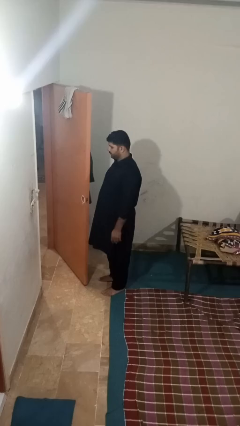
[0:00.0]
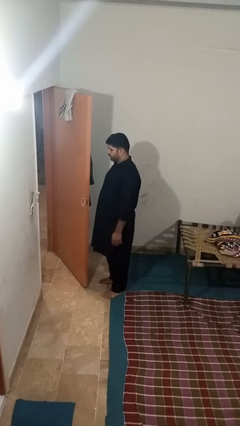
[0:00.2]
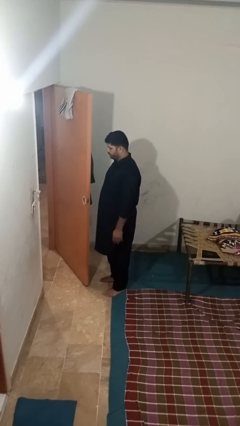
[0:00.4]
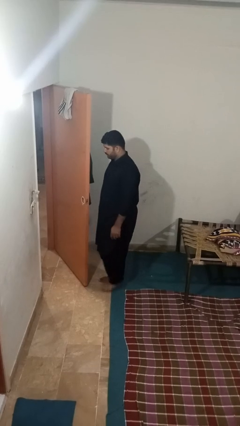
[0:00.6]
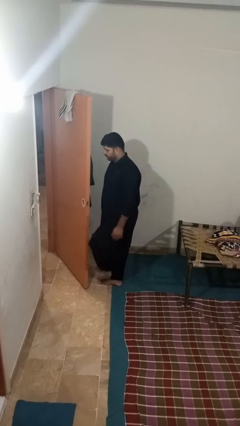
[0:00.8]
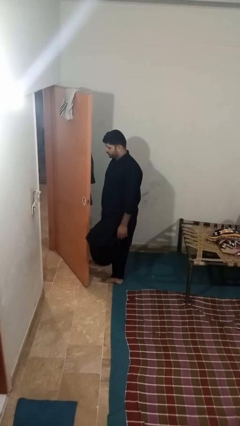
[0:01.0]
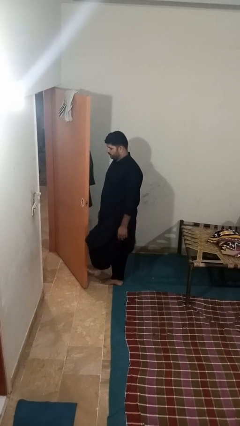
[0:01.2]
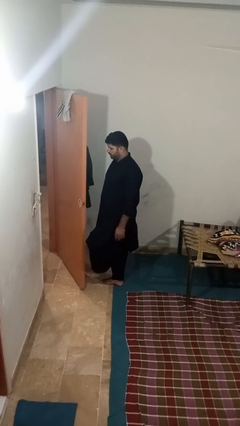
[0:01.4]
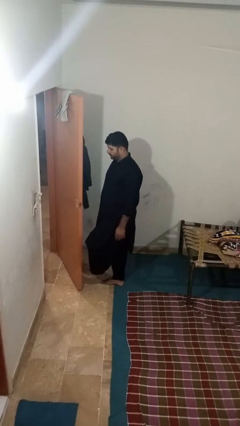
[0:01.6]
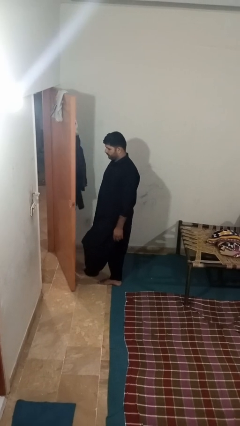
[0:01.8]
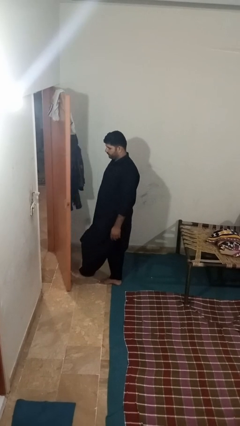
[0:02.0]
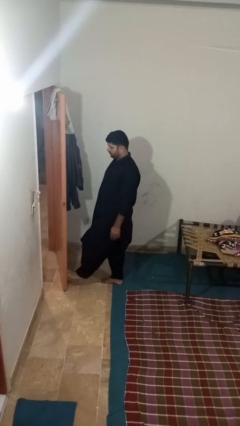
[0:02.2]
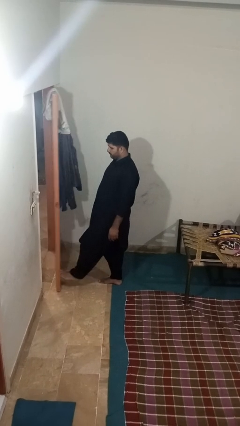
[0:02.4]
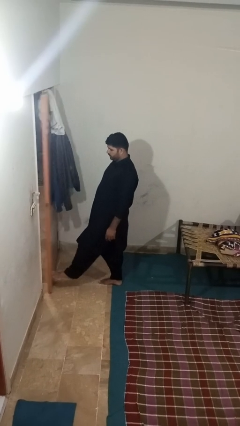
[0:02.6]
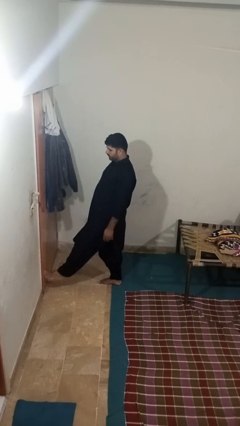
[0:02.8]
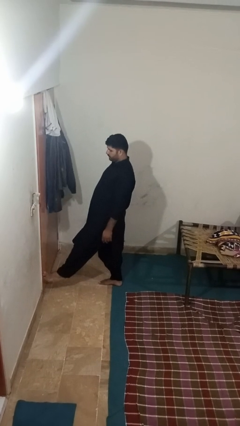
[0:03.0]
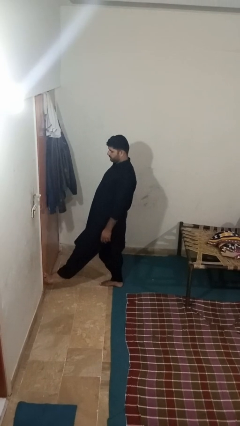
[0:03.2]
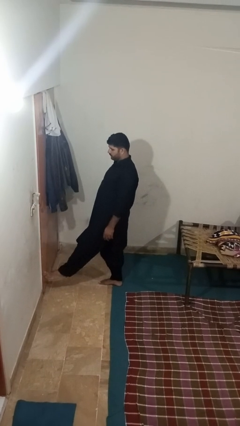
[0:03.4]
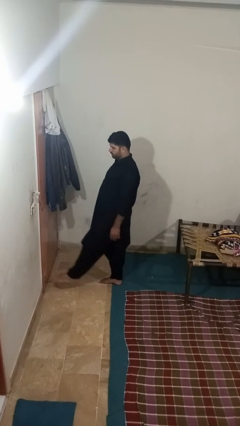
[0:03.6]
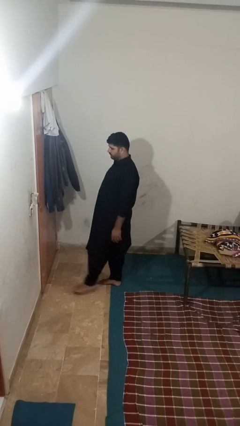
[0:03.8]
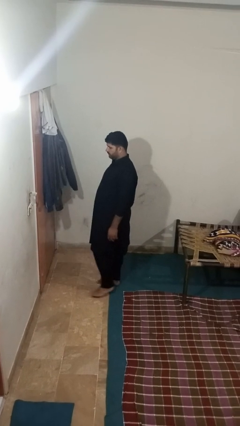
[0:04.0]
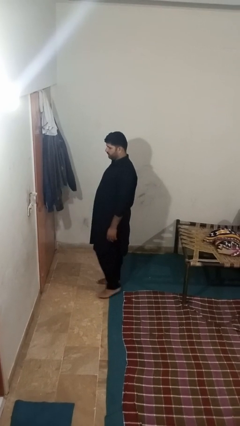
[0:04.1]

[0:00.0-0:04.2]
person closes door with foot

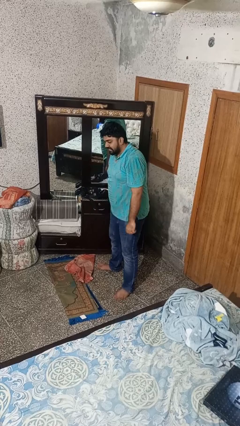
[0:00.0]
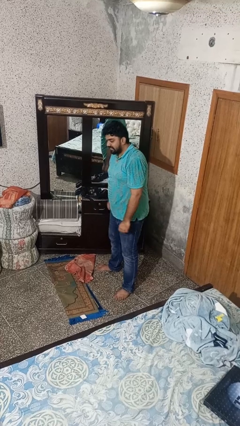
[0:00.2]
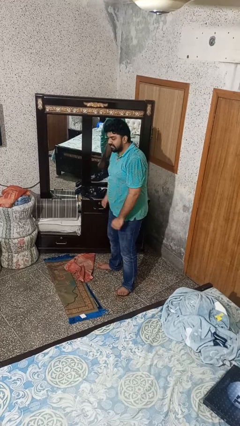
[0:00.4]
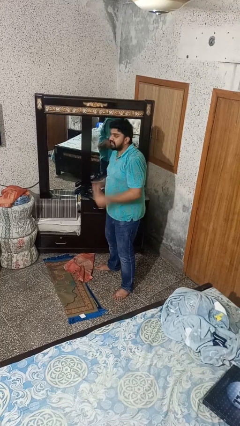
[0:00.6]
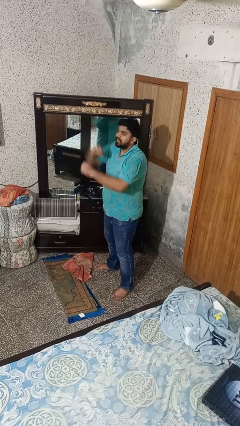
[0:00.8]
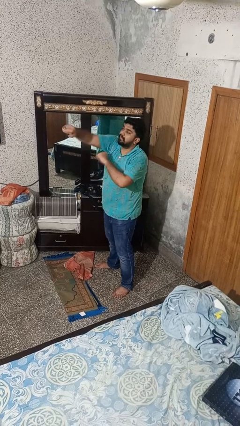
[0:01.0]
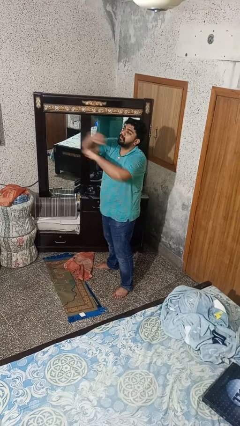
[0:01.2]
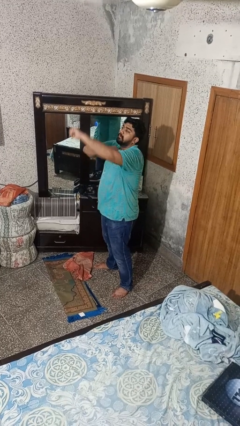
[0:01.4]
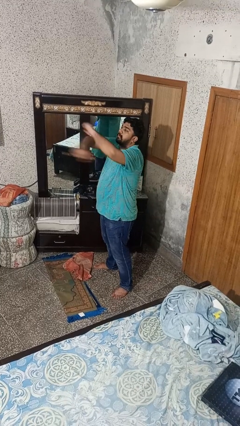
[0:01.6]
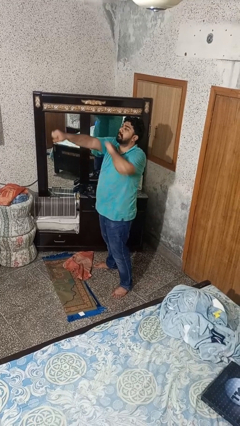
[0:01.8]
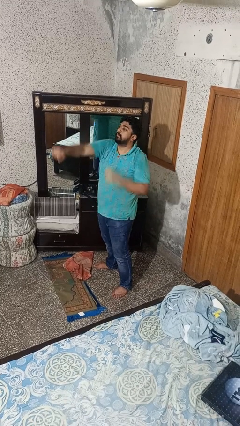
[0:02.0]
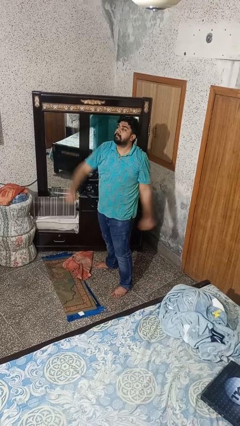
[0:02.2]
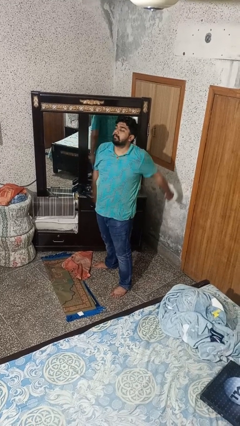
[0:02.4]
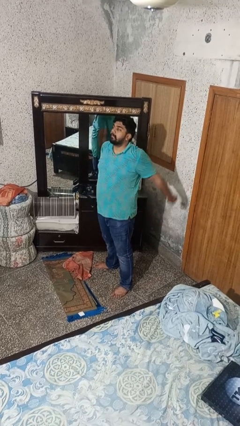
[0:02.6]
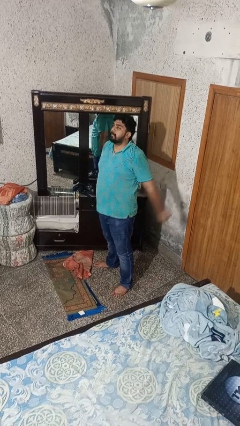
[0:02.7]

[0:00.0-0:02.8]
person punches

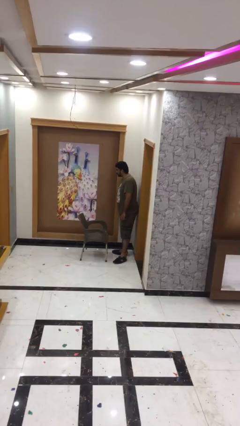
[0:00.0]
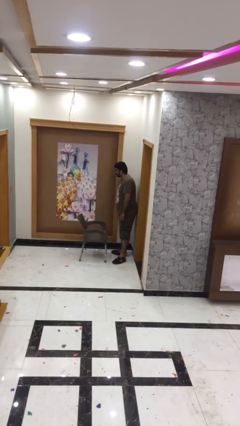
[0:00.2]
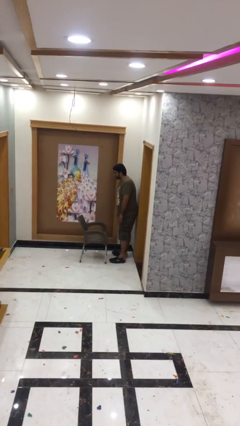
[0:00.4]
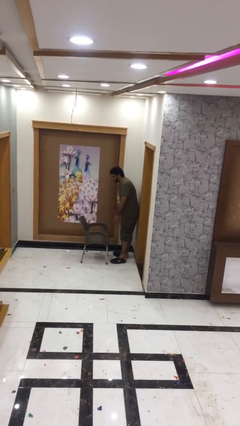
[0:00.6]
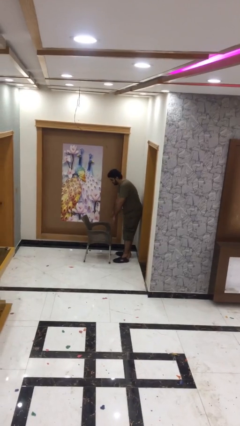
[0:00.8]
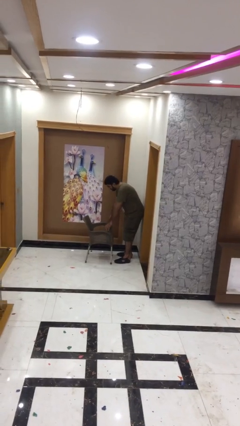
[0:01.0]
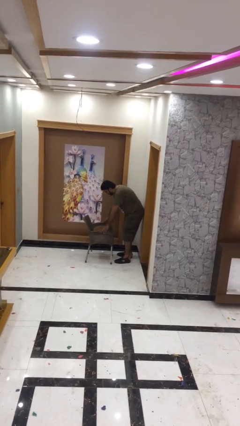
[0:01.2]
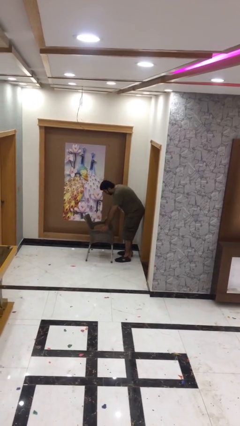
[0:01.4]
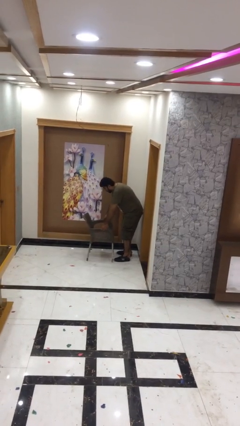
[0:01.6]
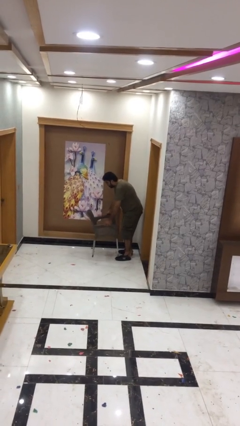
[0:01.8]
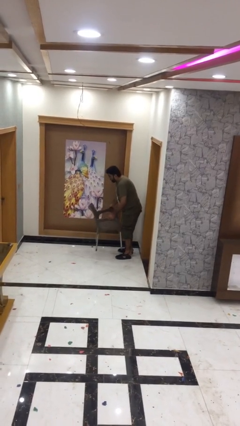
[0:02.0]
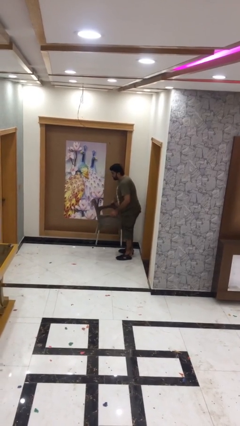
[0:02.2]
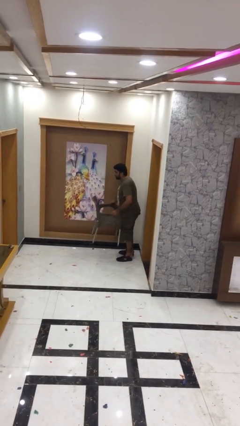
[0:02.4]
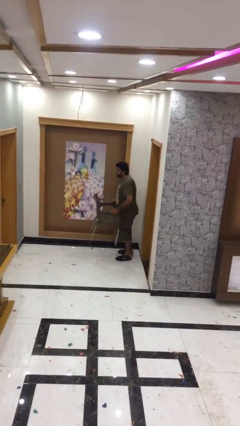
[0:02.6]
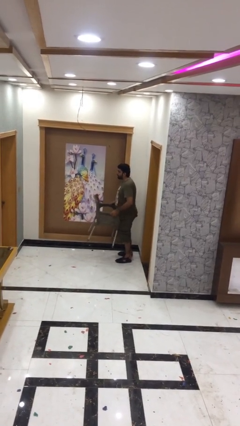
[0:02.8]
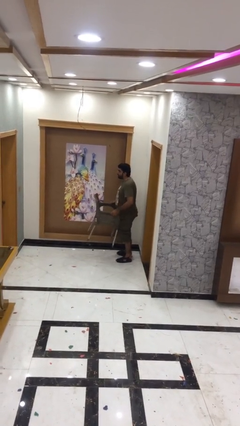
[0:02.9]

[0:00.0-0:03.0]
person picks up object from floor

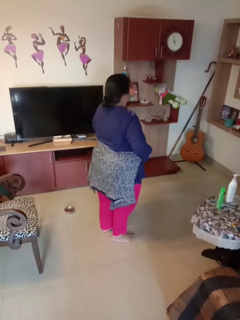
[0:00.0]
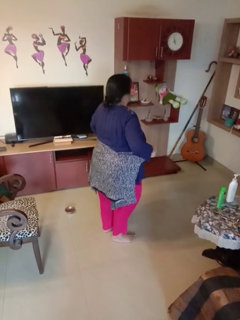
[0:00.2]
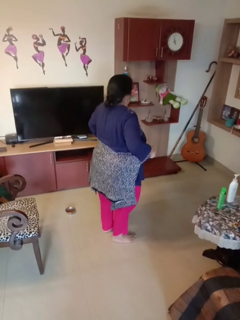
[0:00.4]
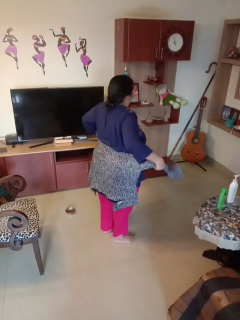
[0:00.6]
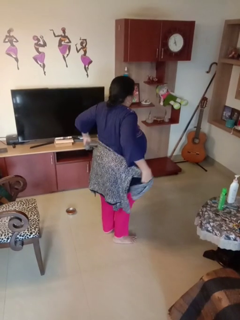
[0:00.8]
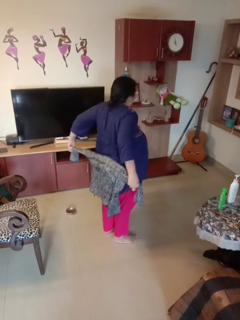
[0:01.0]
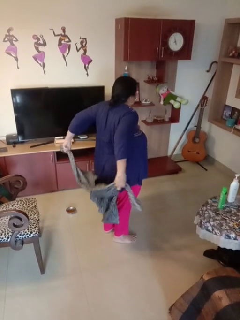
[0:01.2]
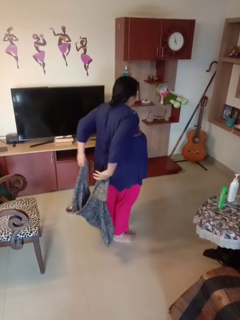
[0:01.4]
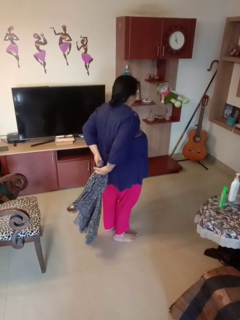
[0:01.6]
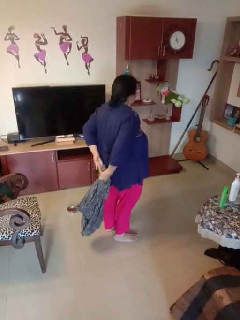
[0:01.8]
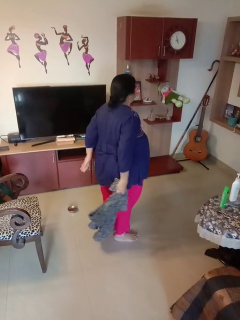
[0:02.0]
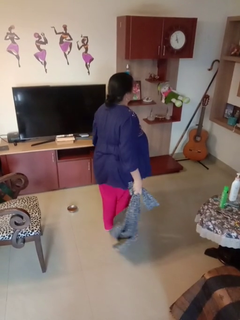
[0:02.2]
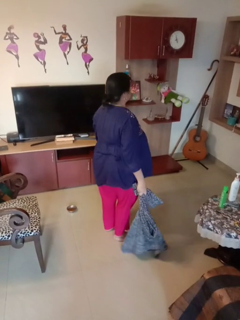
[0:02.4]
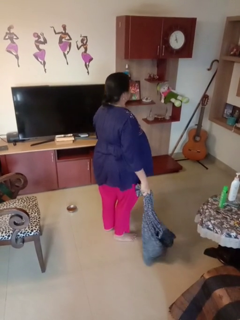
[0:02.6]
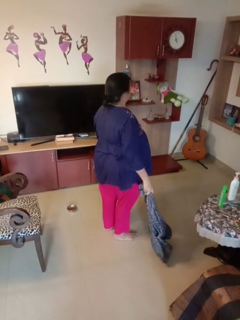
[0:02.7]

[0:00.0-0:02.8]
person unties jacket around waist

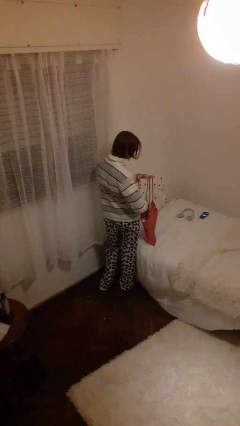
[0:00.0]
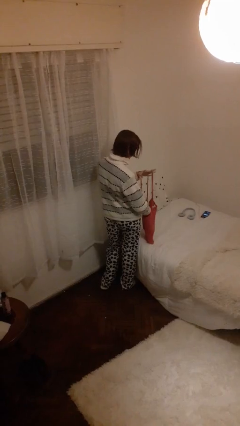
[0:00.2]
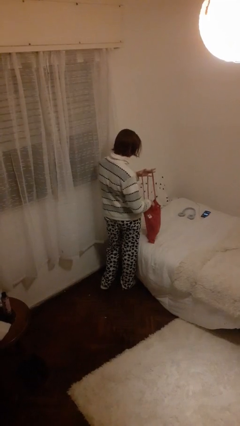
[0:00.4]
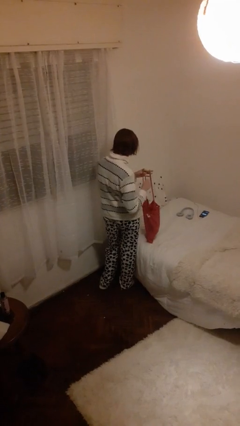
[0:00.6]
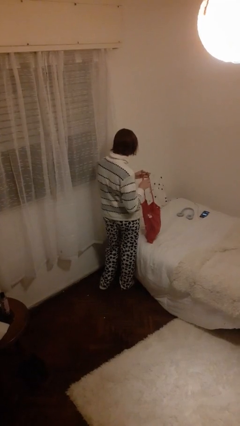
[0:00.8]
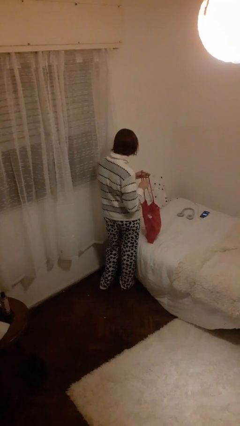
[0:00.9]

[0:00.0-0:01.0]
person puts object into bag

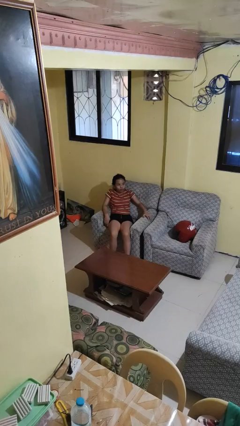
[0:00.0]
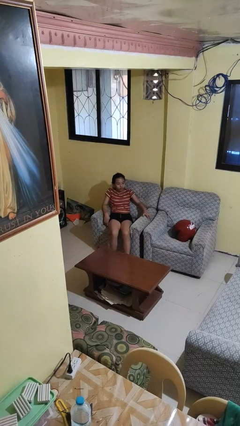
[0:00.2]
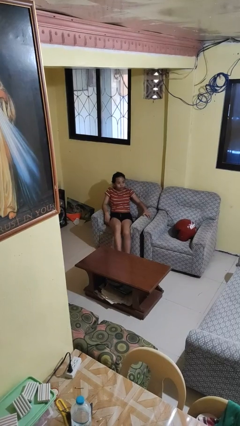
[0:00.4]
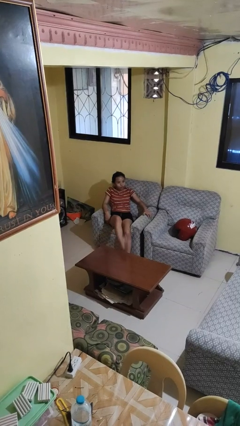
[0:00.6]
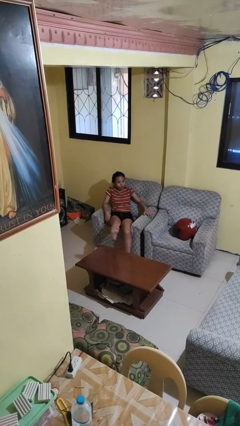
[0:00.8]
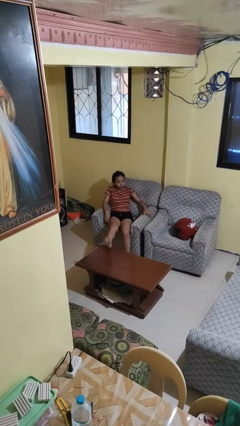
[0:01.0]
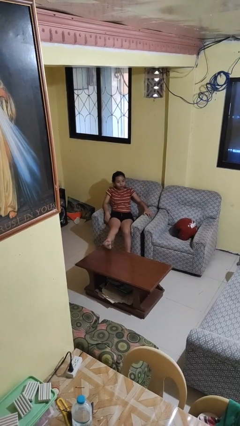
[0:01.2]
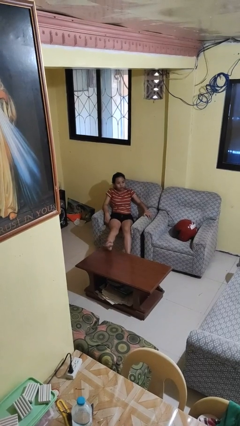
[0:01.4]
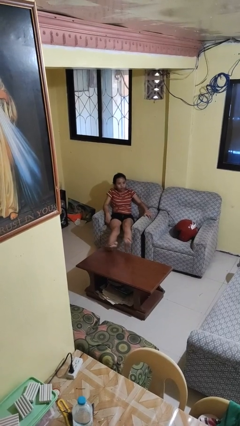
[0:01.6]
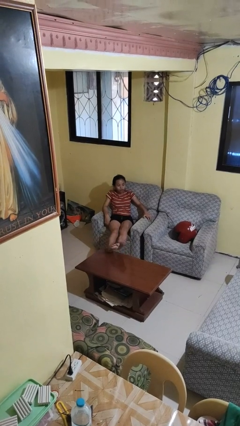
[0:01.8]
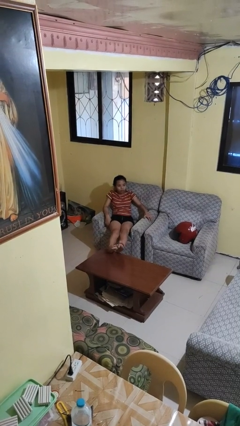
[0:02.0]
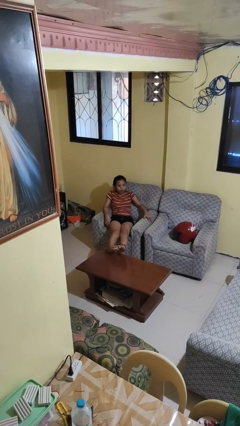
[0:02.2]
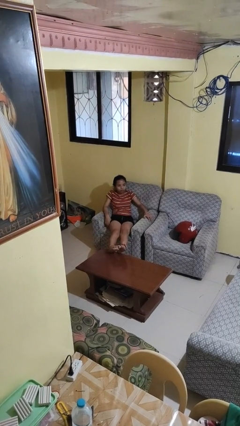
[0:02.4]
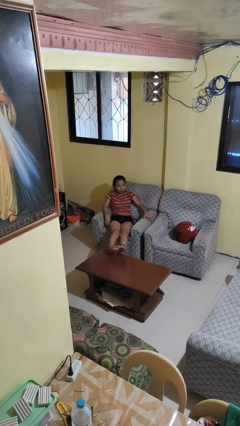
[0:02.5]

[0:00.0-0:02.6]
person puts feet up

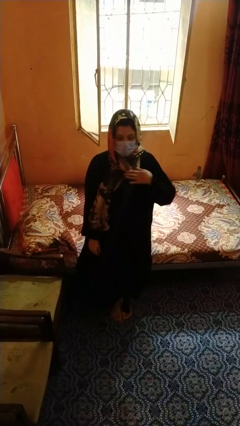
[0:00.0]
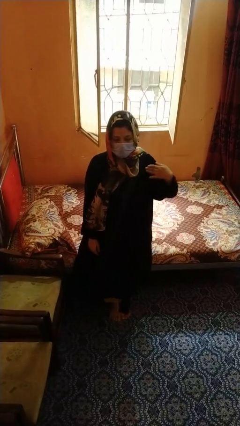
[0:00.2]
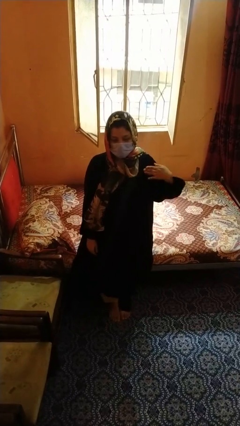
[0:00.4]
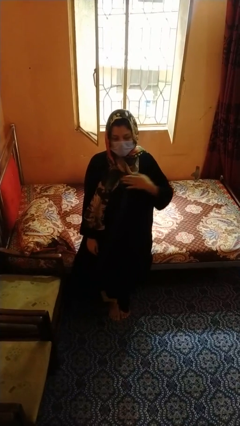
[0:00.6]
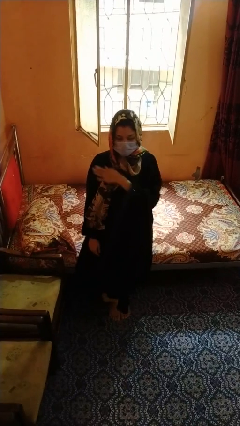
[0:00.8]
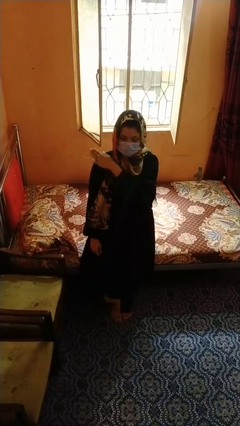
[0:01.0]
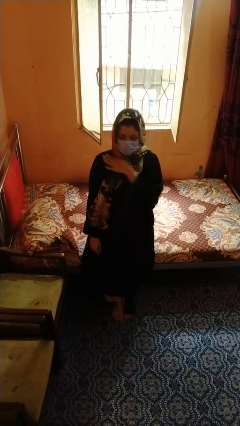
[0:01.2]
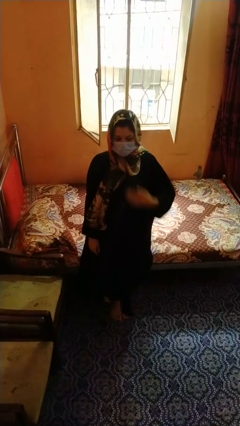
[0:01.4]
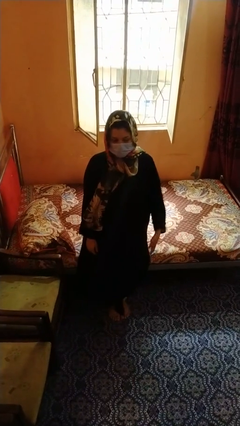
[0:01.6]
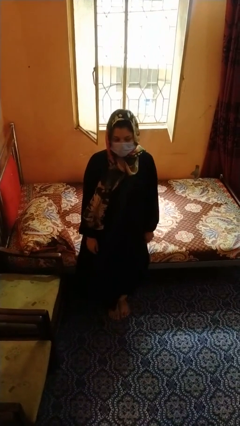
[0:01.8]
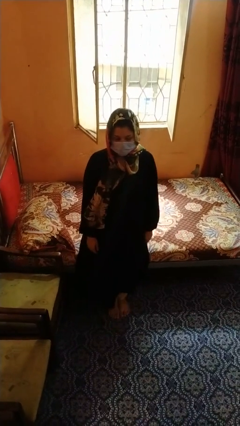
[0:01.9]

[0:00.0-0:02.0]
person gestures cut
